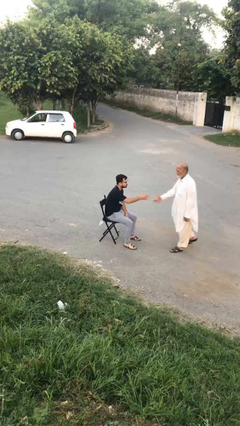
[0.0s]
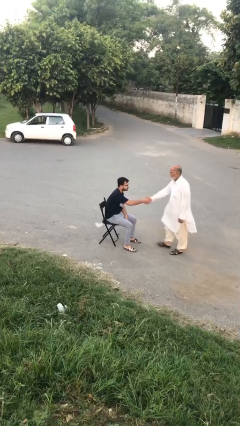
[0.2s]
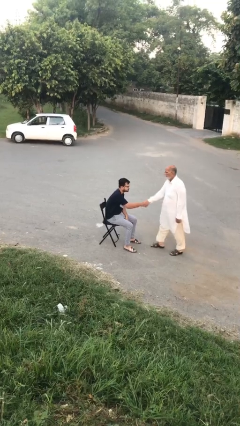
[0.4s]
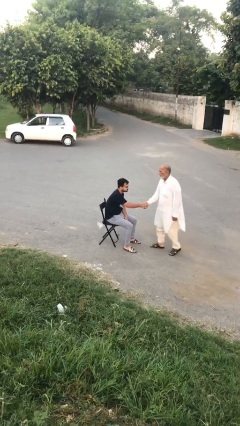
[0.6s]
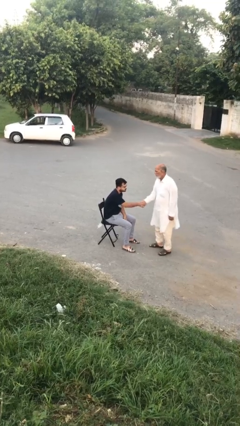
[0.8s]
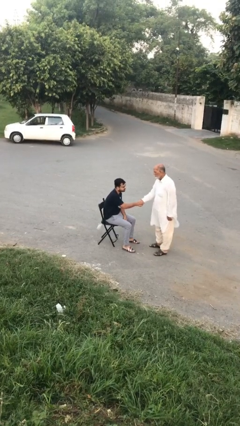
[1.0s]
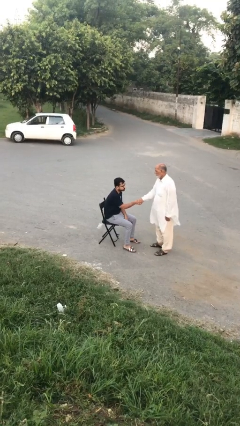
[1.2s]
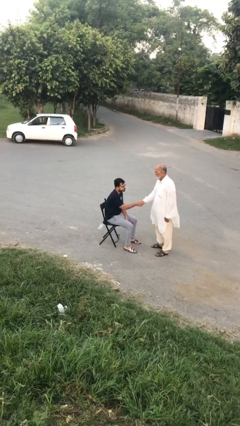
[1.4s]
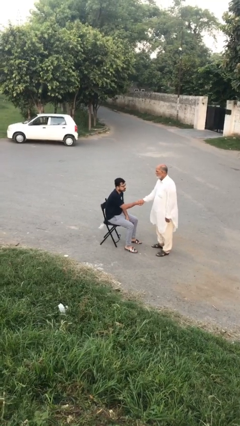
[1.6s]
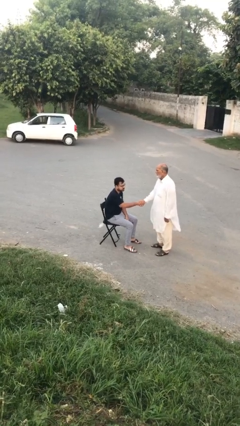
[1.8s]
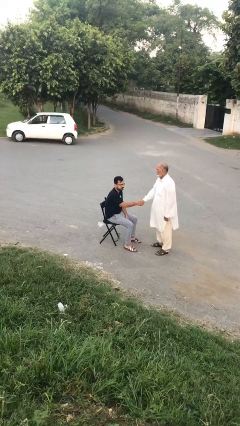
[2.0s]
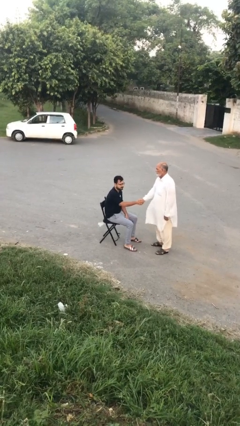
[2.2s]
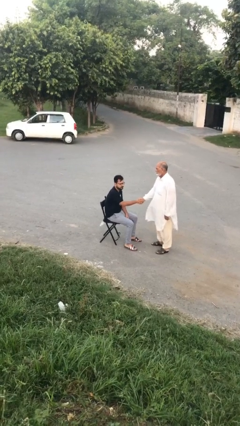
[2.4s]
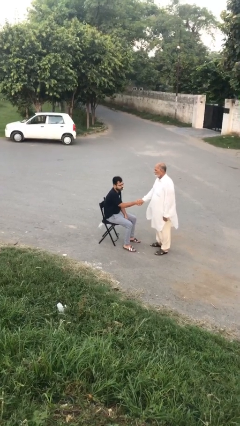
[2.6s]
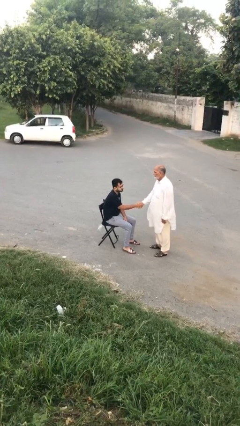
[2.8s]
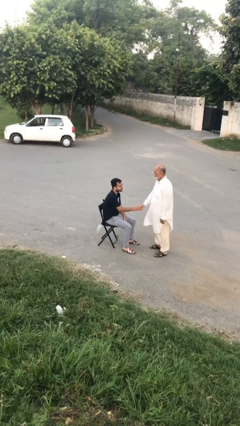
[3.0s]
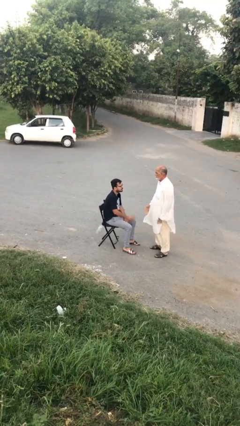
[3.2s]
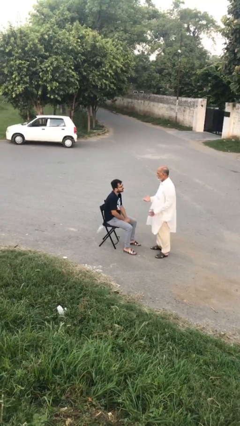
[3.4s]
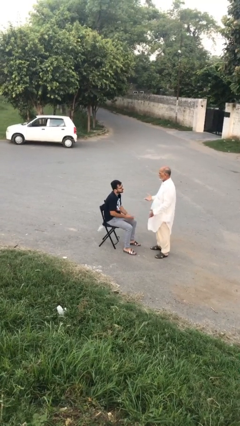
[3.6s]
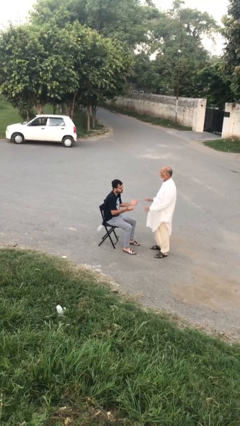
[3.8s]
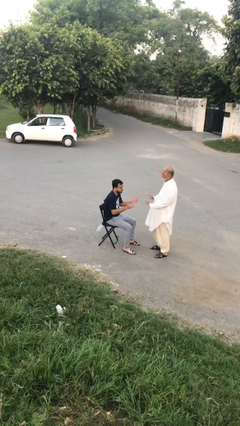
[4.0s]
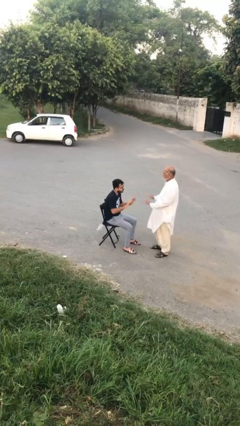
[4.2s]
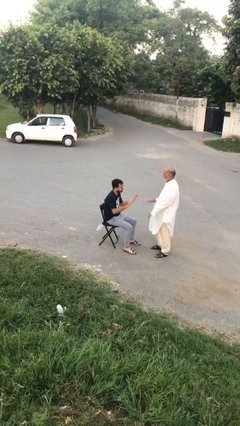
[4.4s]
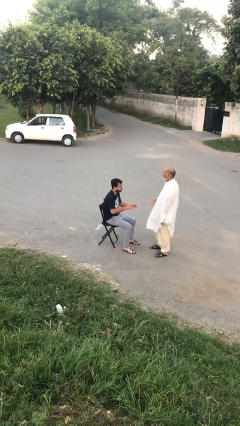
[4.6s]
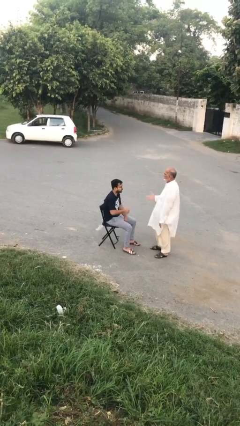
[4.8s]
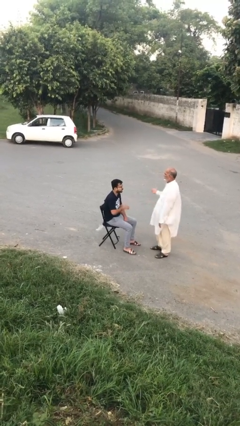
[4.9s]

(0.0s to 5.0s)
person shakes hand

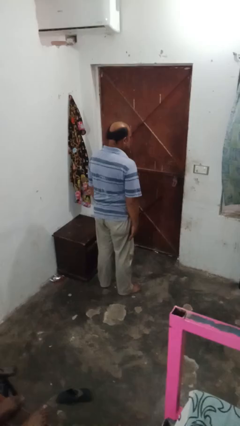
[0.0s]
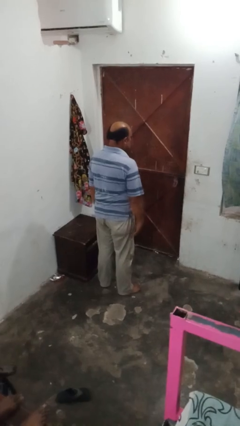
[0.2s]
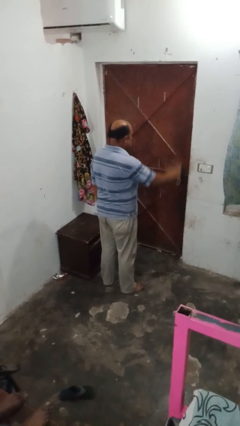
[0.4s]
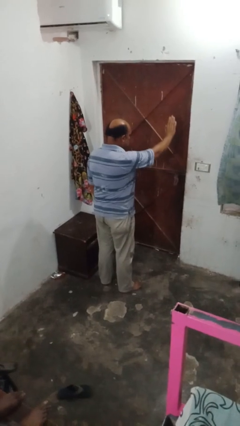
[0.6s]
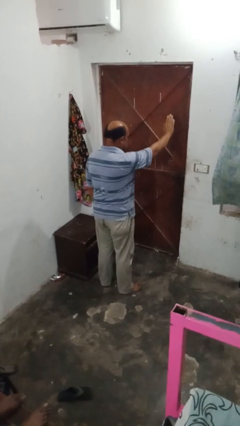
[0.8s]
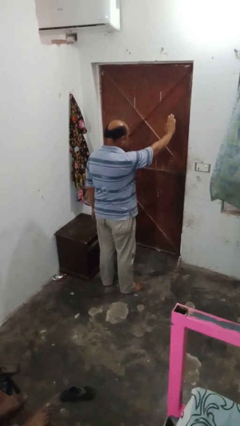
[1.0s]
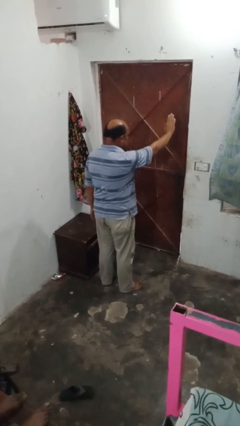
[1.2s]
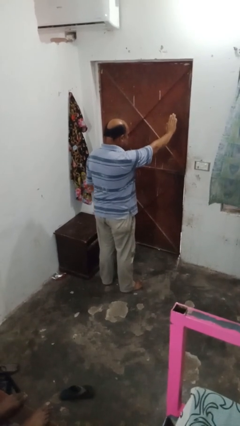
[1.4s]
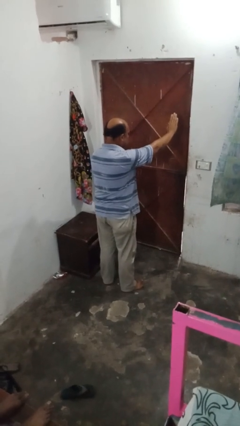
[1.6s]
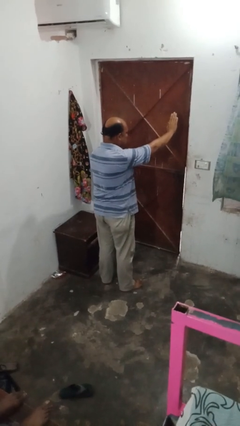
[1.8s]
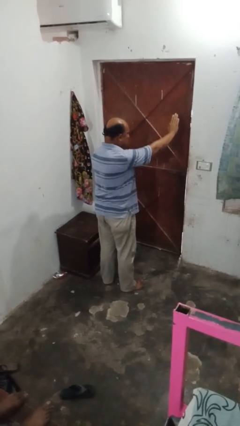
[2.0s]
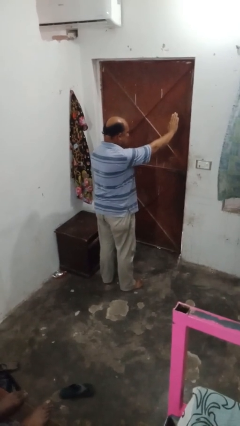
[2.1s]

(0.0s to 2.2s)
person gestures stop

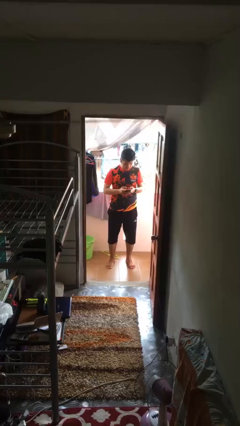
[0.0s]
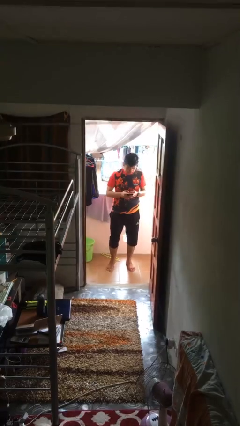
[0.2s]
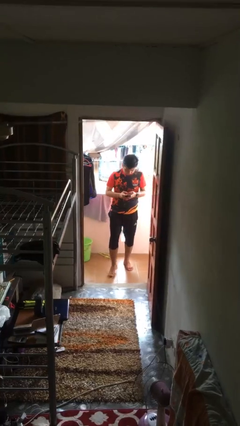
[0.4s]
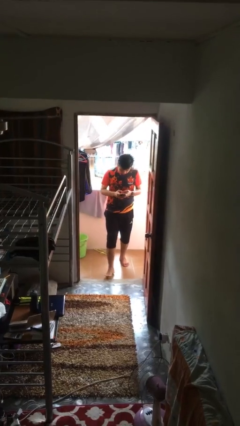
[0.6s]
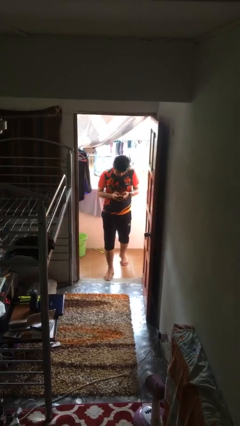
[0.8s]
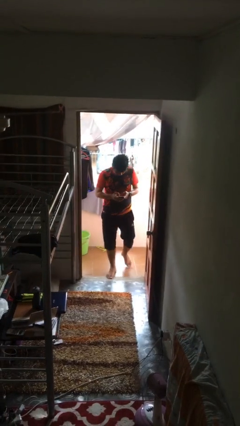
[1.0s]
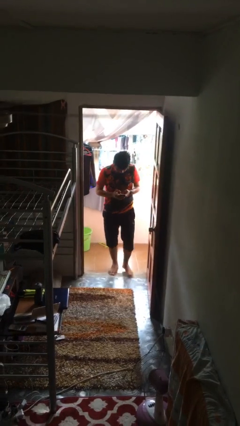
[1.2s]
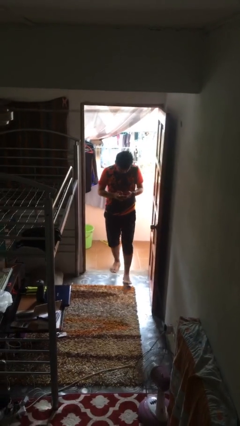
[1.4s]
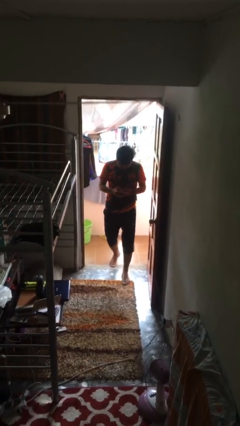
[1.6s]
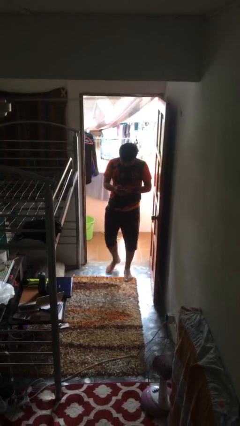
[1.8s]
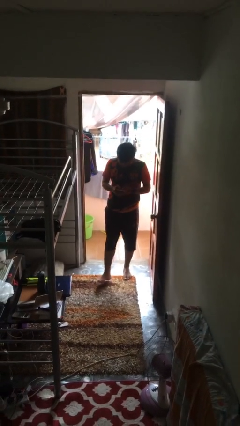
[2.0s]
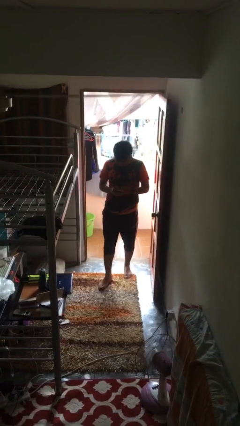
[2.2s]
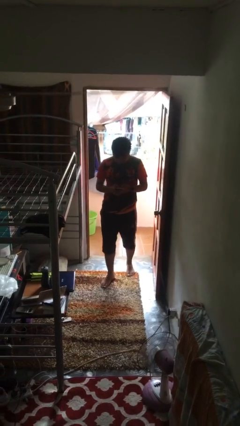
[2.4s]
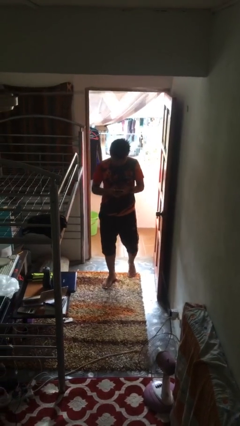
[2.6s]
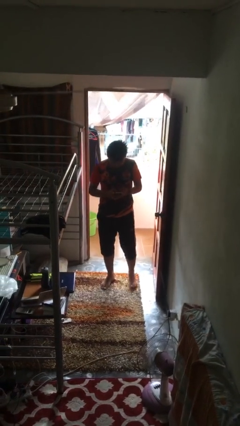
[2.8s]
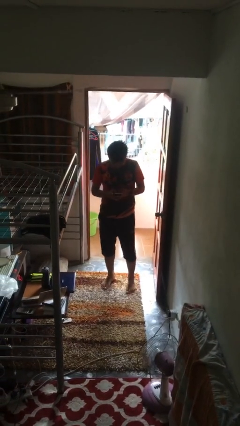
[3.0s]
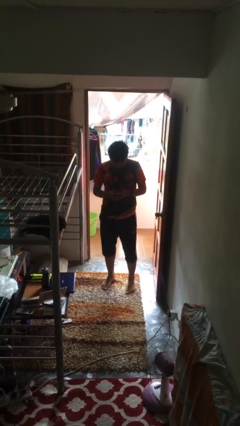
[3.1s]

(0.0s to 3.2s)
person enters scene through structure

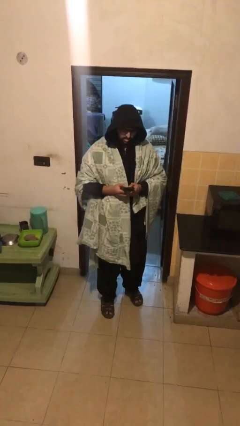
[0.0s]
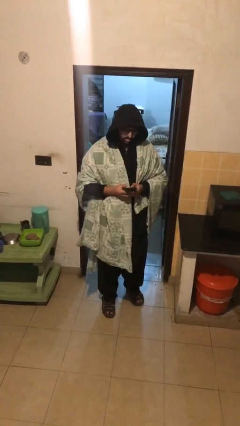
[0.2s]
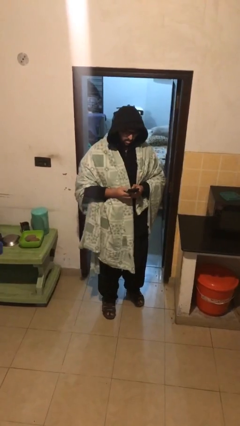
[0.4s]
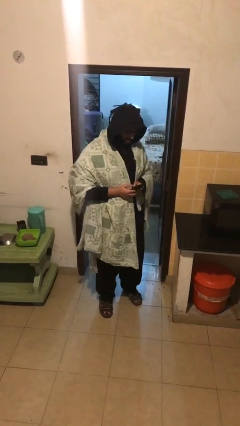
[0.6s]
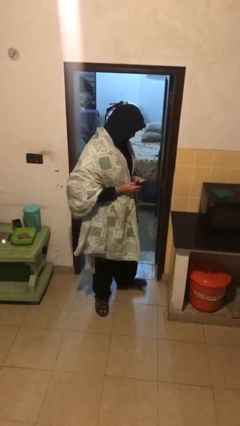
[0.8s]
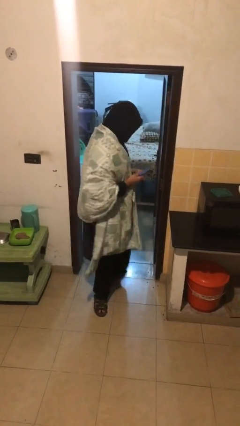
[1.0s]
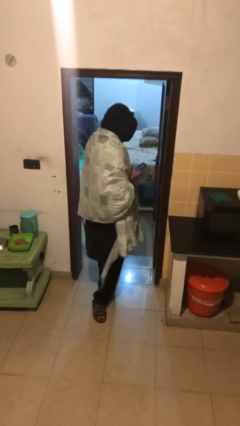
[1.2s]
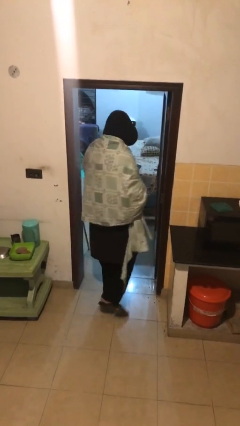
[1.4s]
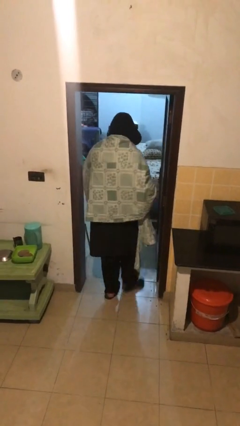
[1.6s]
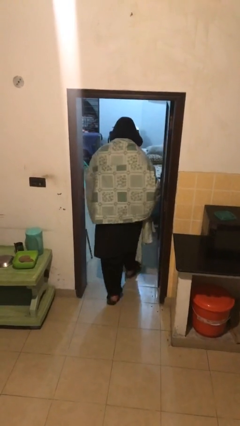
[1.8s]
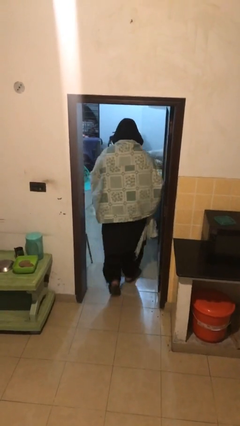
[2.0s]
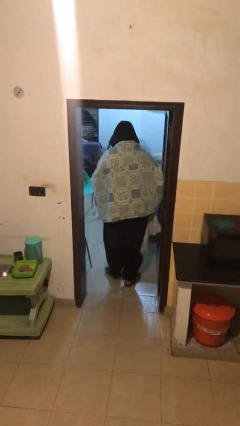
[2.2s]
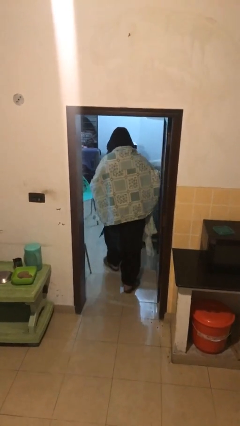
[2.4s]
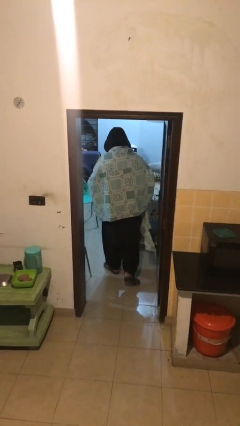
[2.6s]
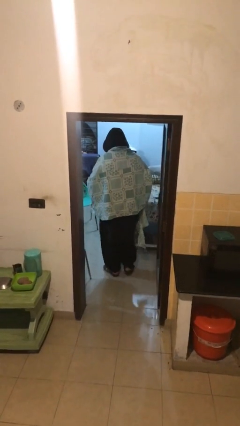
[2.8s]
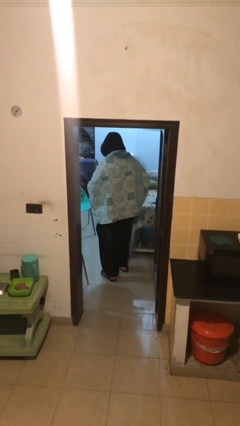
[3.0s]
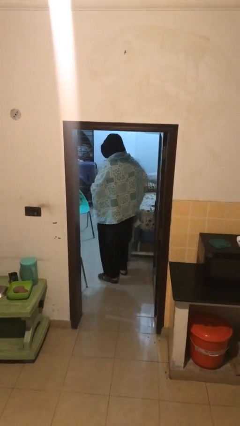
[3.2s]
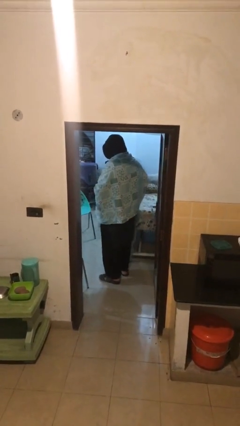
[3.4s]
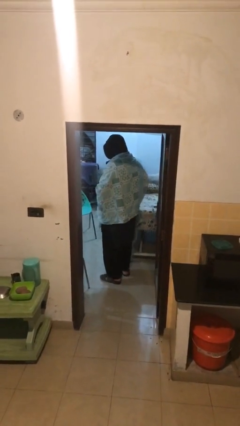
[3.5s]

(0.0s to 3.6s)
person exits scene through structure

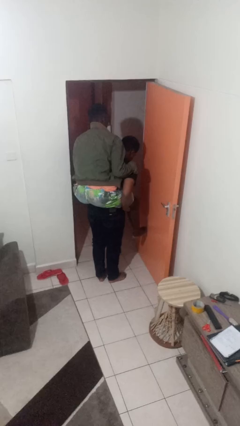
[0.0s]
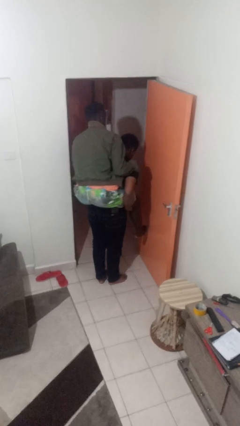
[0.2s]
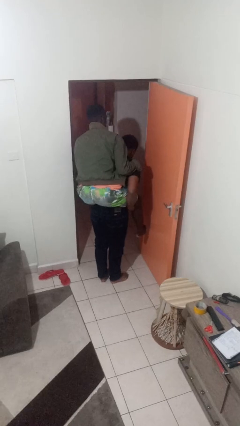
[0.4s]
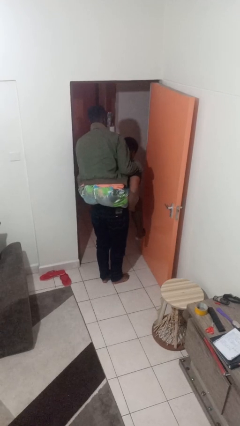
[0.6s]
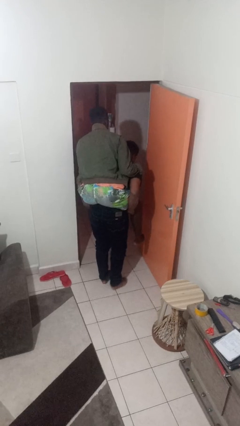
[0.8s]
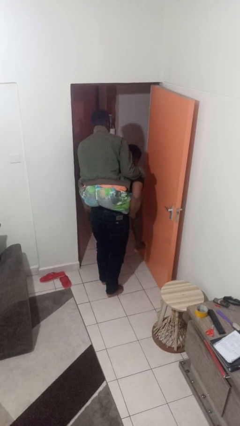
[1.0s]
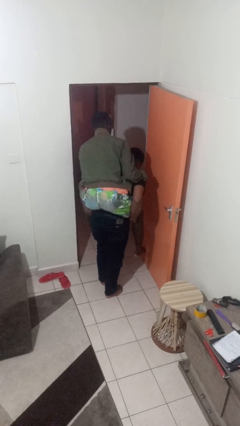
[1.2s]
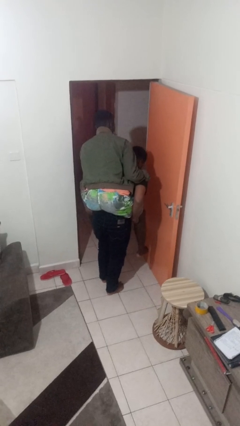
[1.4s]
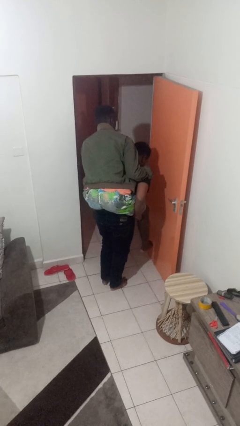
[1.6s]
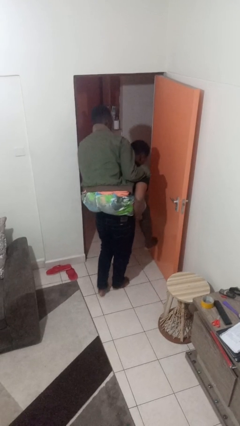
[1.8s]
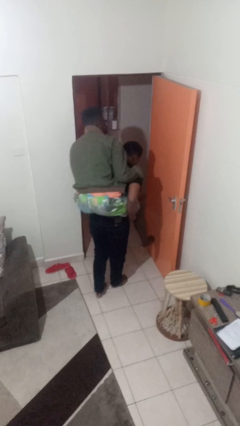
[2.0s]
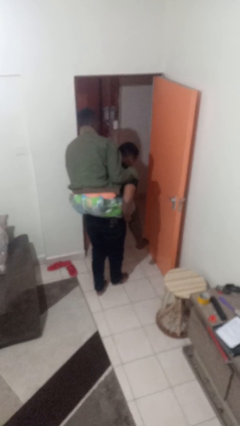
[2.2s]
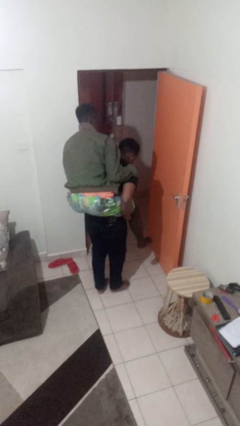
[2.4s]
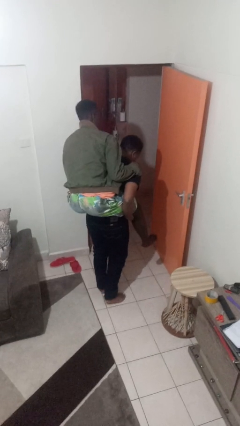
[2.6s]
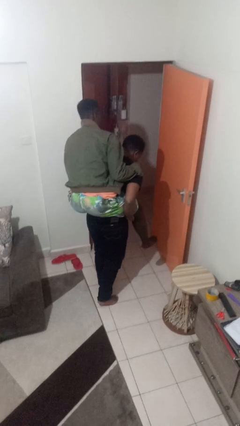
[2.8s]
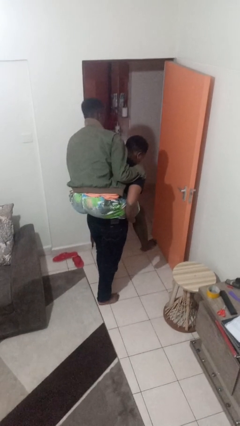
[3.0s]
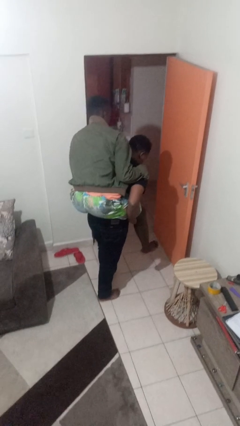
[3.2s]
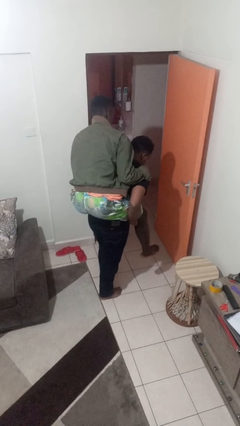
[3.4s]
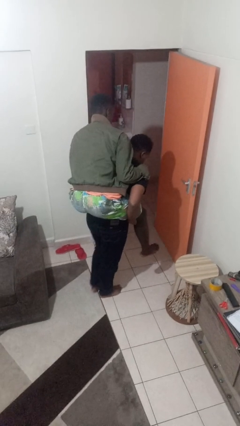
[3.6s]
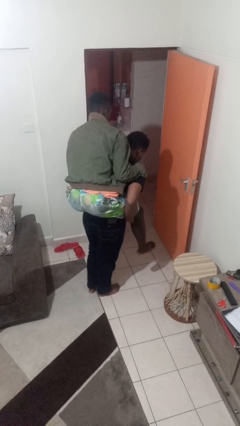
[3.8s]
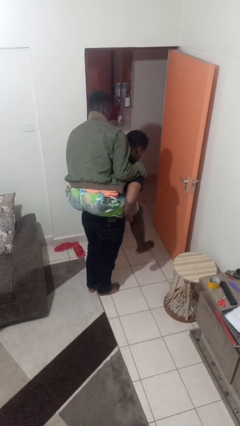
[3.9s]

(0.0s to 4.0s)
person carries person on back
